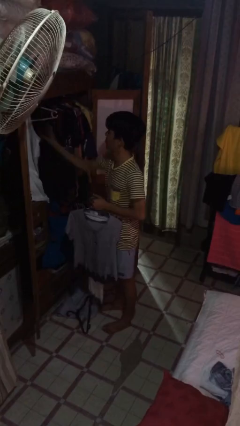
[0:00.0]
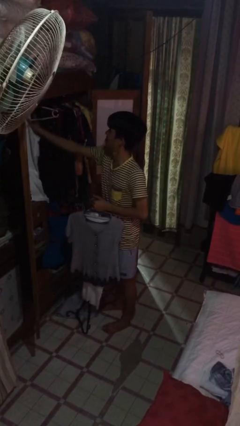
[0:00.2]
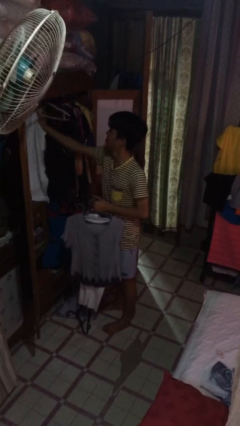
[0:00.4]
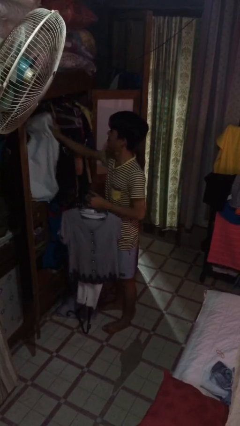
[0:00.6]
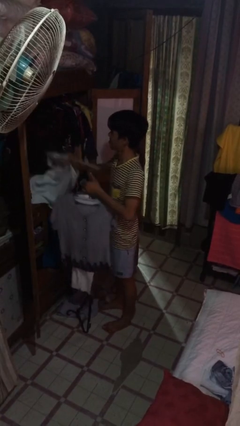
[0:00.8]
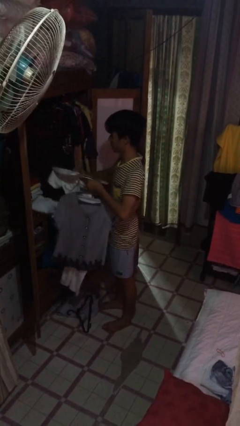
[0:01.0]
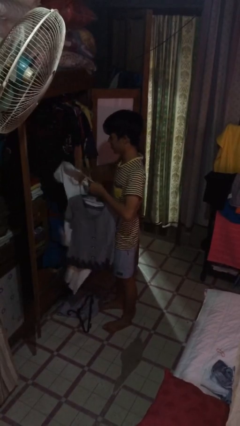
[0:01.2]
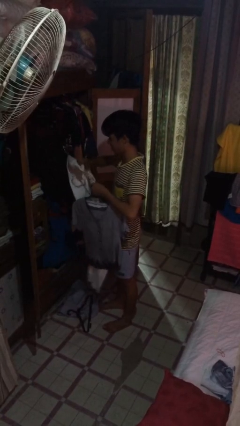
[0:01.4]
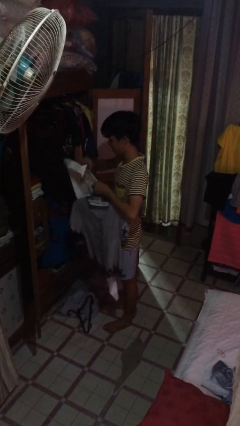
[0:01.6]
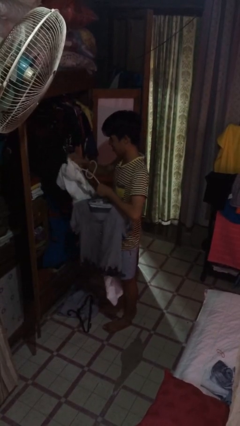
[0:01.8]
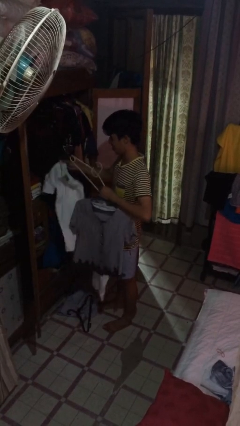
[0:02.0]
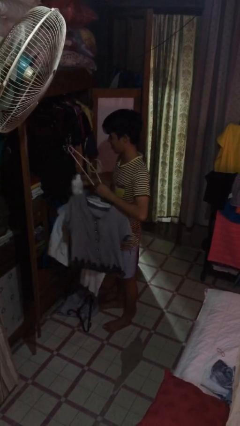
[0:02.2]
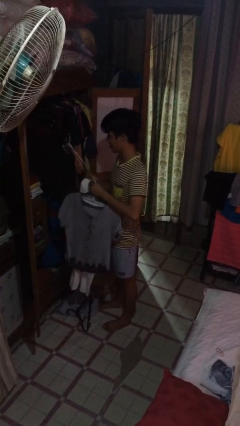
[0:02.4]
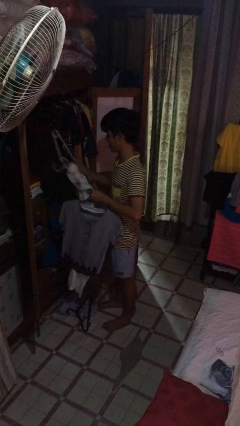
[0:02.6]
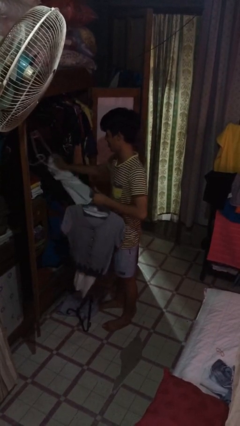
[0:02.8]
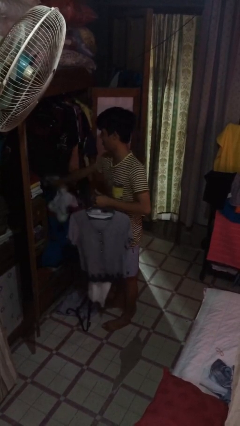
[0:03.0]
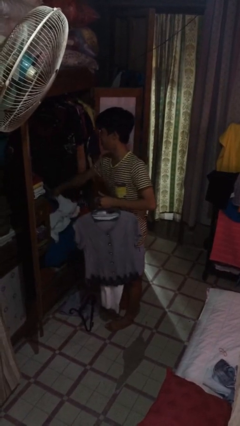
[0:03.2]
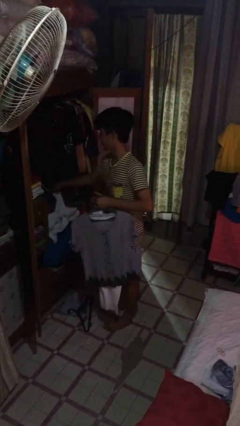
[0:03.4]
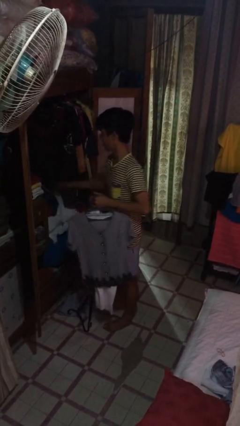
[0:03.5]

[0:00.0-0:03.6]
person takes clothes from closet

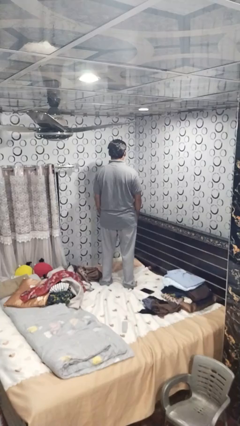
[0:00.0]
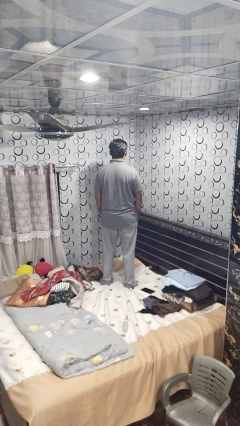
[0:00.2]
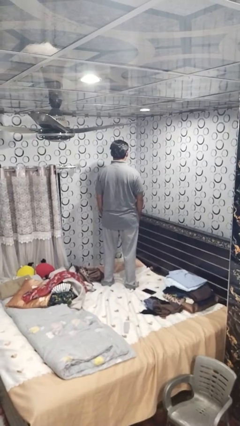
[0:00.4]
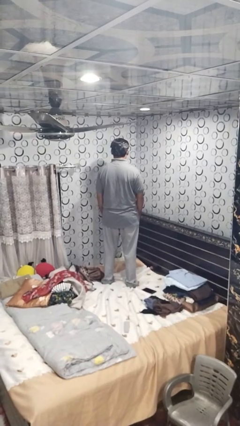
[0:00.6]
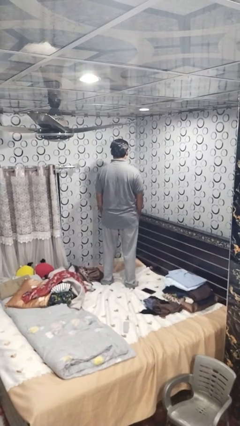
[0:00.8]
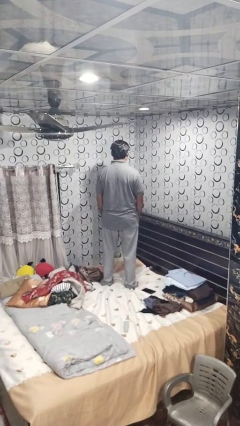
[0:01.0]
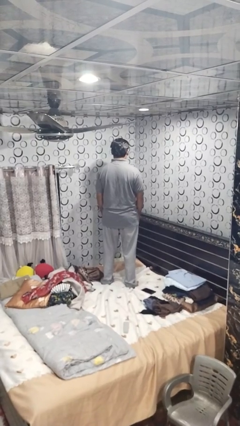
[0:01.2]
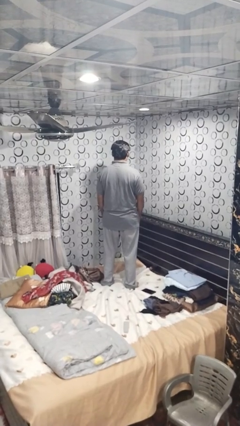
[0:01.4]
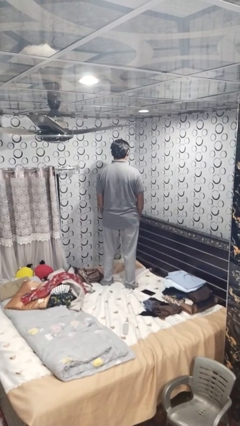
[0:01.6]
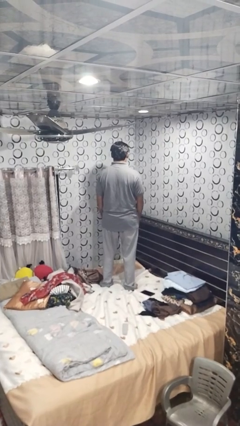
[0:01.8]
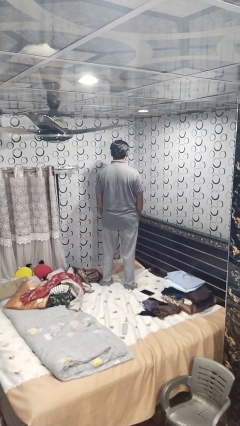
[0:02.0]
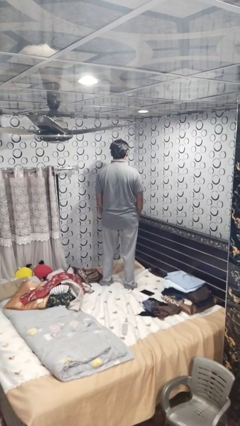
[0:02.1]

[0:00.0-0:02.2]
person jumps on bed

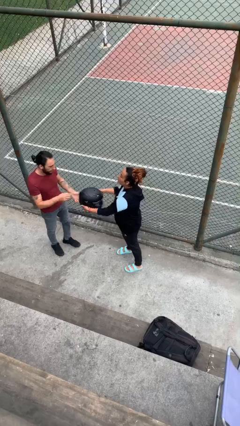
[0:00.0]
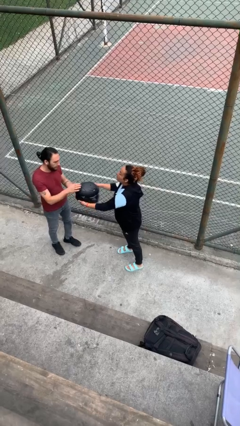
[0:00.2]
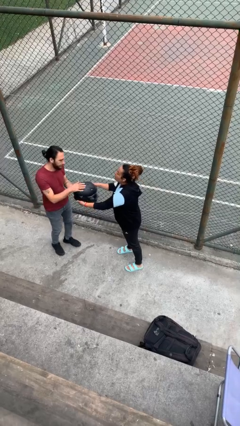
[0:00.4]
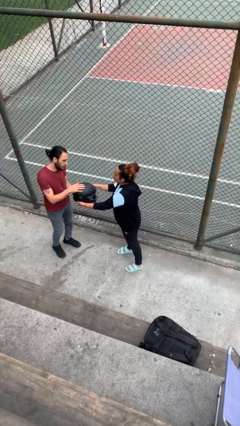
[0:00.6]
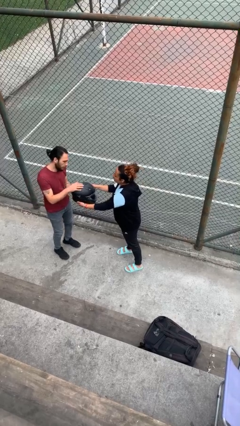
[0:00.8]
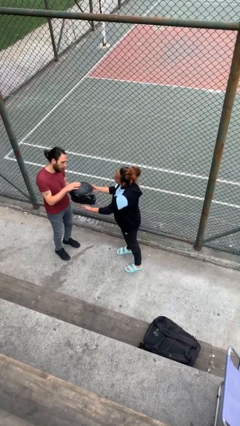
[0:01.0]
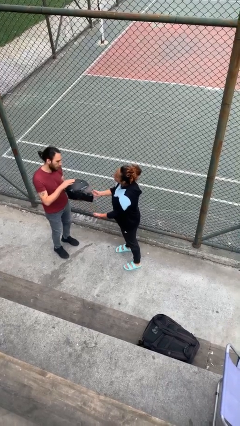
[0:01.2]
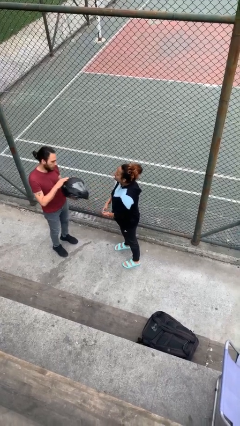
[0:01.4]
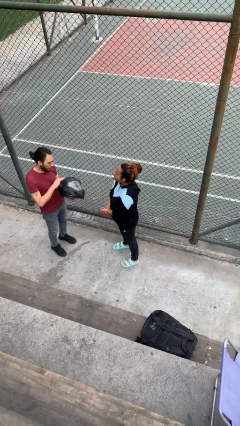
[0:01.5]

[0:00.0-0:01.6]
person transfers object to person

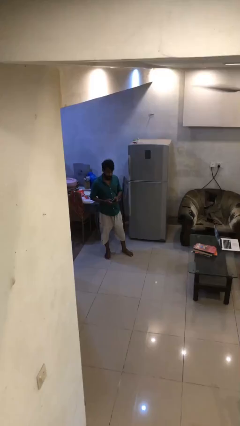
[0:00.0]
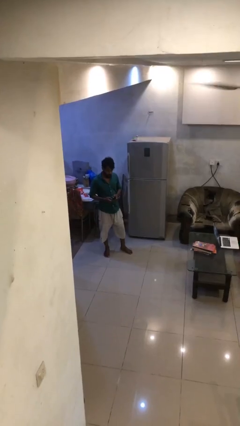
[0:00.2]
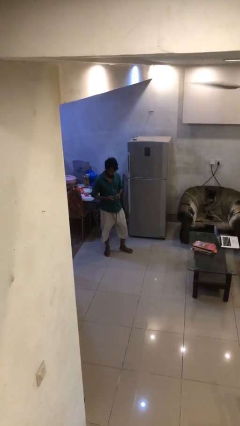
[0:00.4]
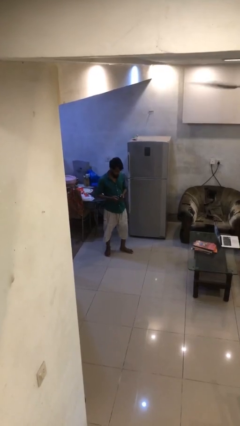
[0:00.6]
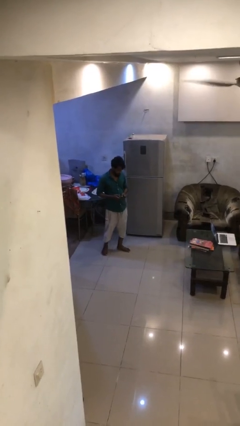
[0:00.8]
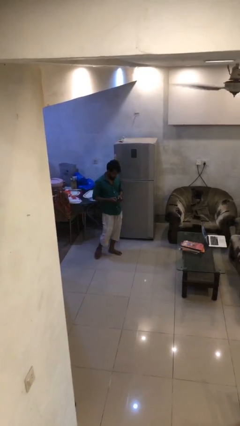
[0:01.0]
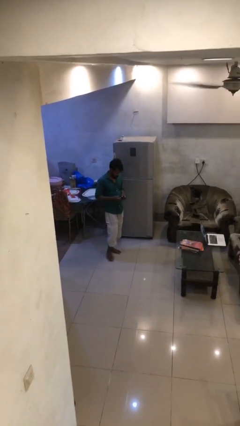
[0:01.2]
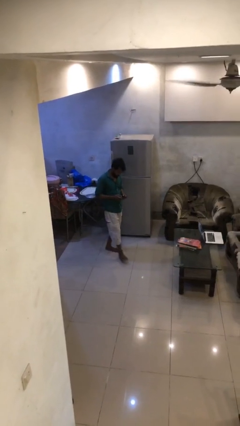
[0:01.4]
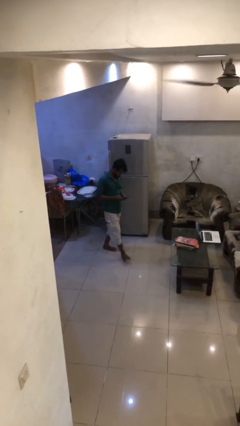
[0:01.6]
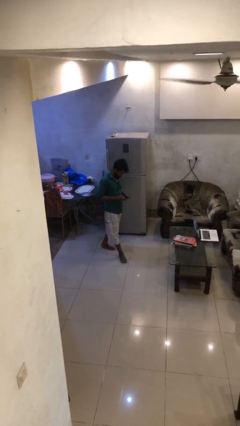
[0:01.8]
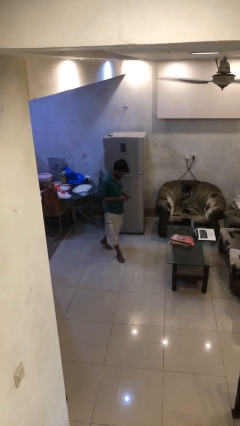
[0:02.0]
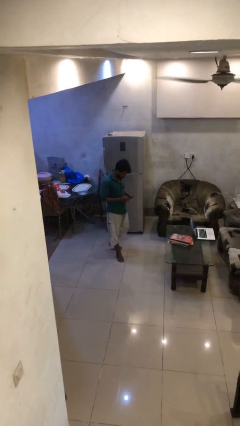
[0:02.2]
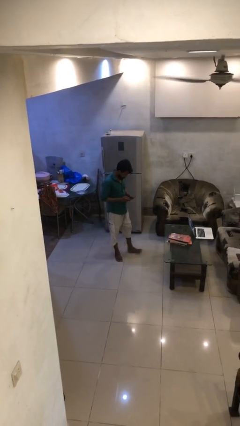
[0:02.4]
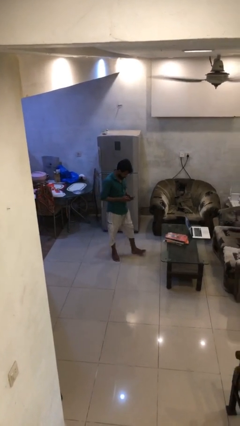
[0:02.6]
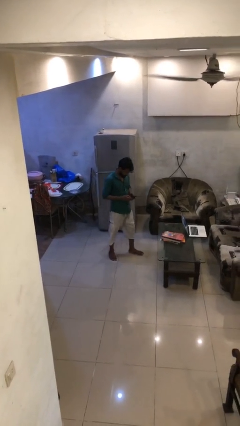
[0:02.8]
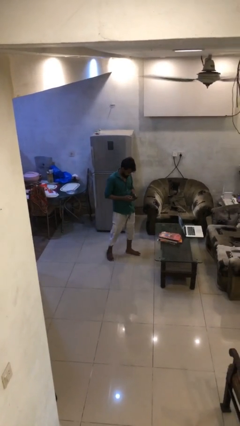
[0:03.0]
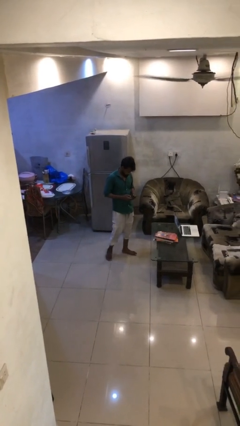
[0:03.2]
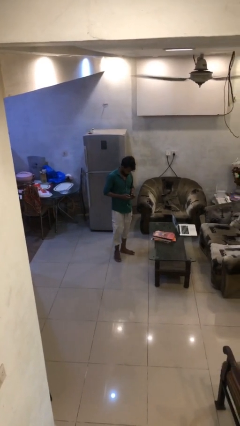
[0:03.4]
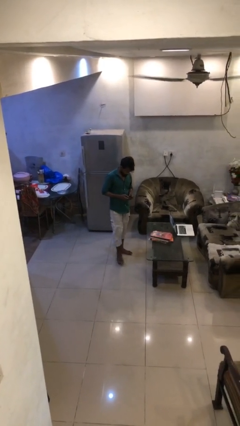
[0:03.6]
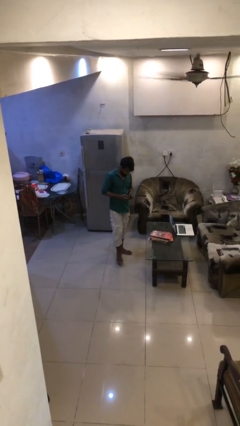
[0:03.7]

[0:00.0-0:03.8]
person texts on phone

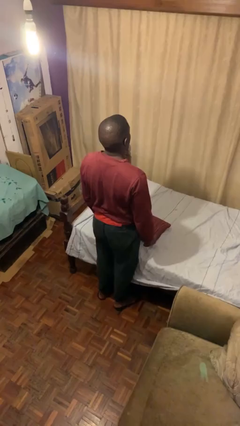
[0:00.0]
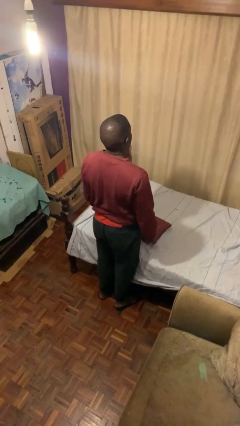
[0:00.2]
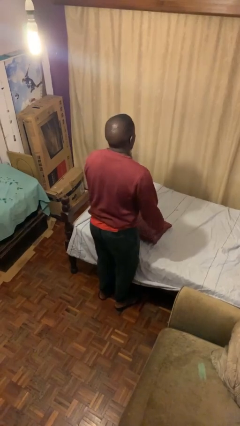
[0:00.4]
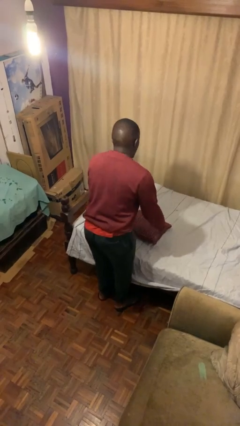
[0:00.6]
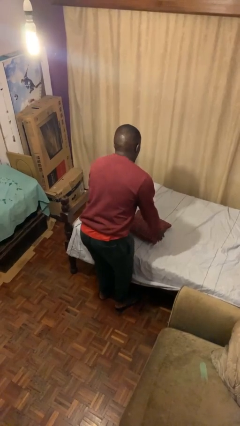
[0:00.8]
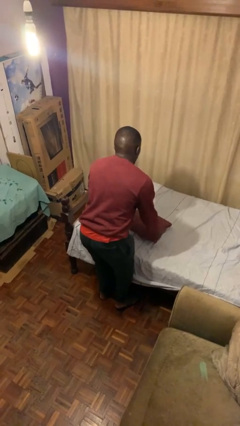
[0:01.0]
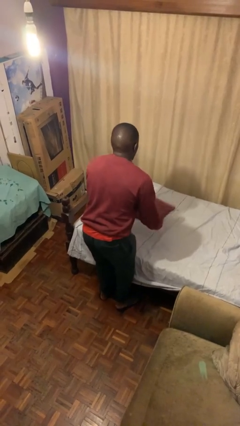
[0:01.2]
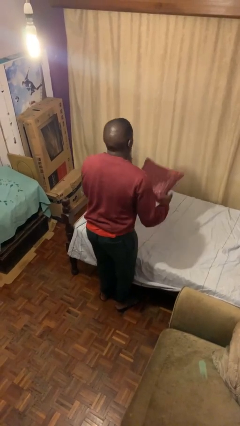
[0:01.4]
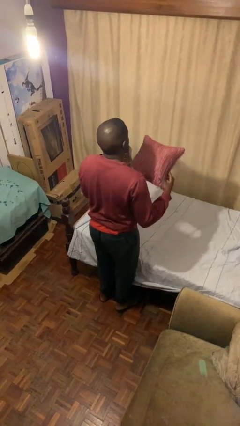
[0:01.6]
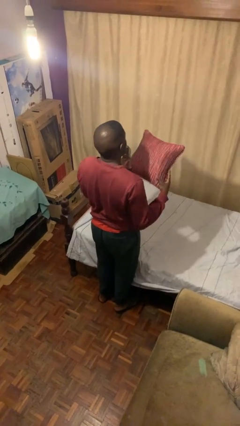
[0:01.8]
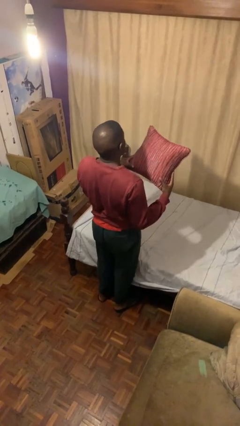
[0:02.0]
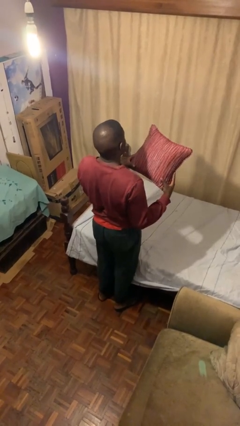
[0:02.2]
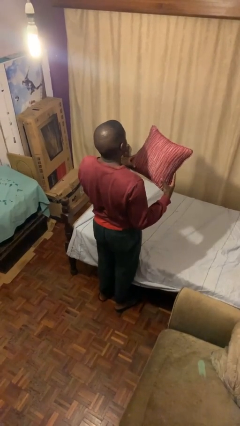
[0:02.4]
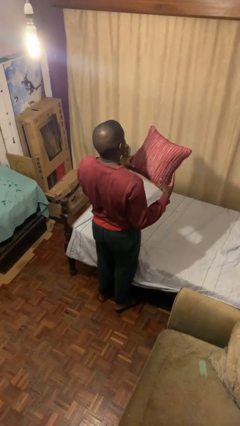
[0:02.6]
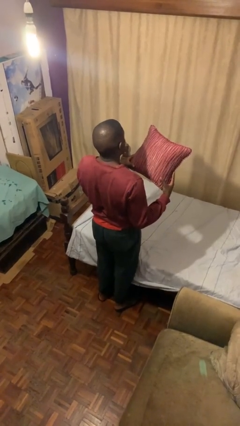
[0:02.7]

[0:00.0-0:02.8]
person picks up object from bed

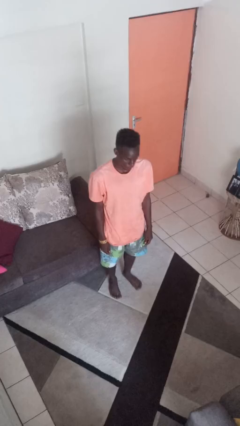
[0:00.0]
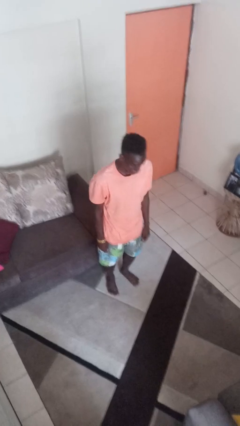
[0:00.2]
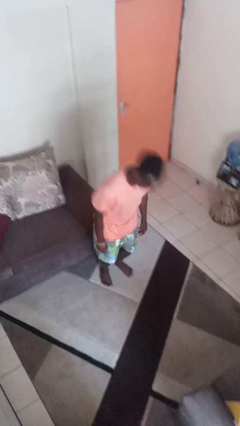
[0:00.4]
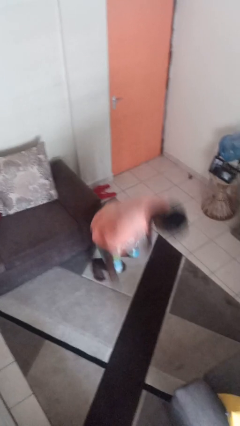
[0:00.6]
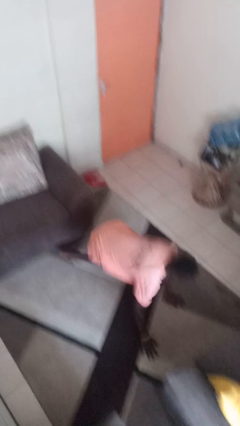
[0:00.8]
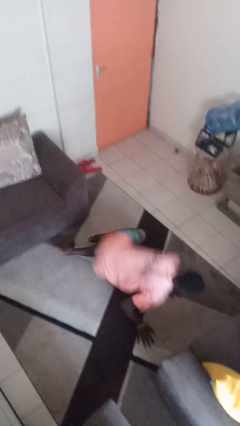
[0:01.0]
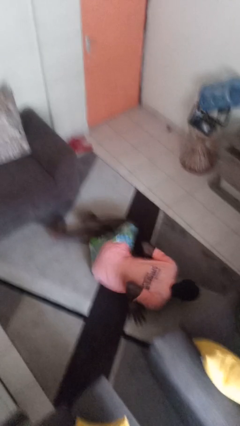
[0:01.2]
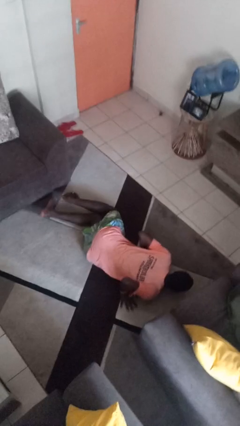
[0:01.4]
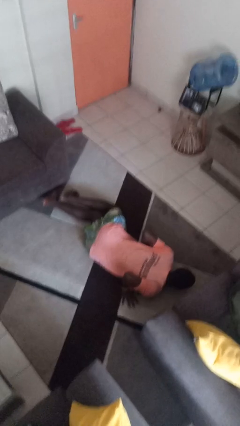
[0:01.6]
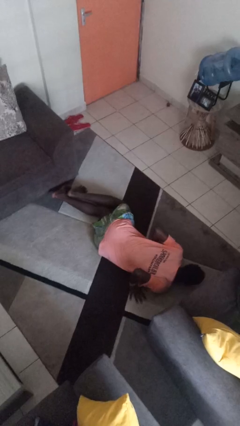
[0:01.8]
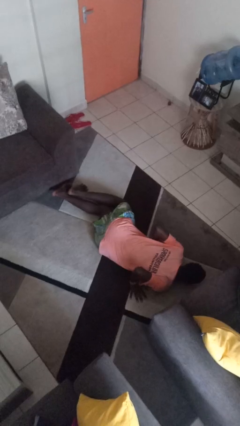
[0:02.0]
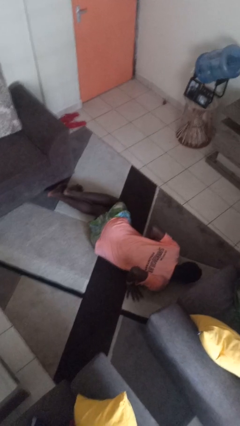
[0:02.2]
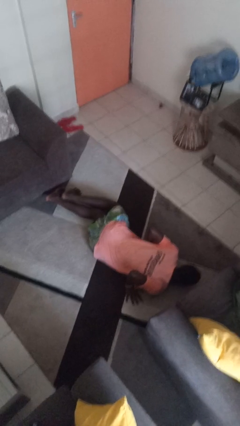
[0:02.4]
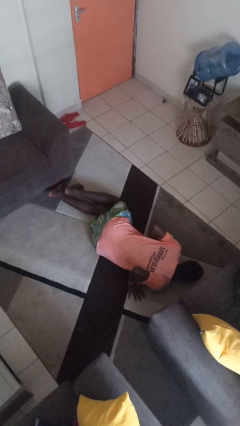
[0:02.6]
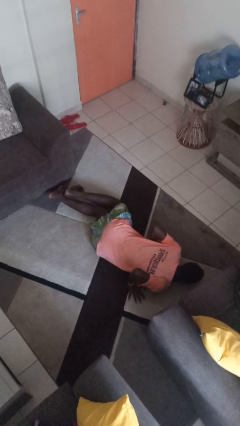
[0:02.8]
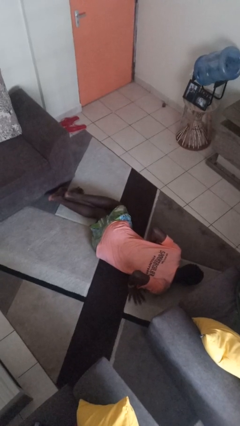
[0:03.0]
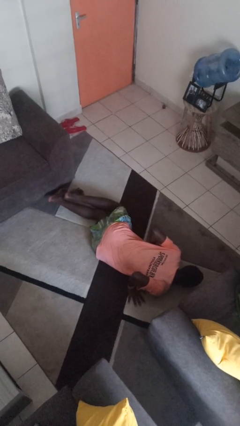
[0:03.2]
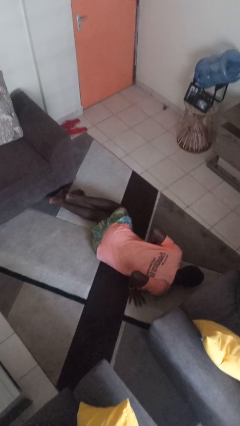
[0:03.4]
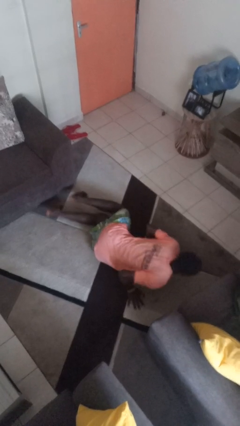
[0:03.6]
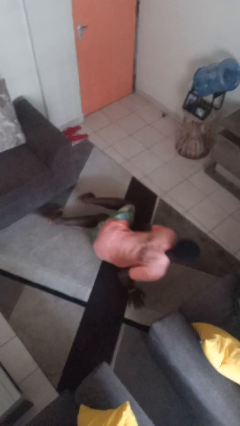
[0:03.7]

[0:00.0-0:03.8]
person falls while standing
